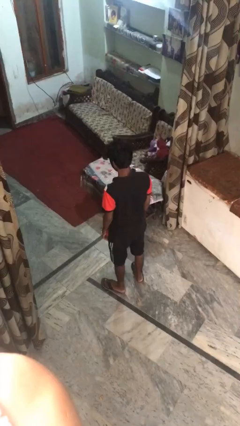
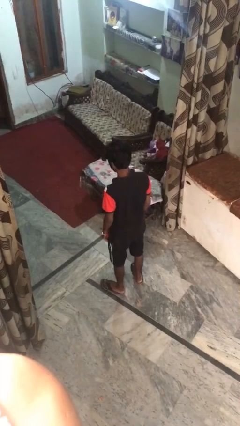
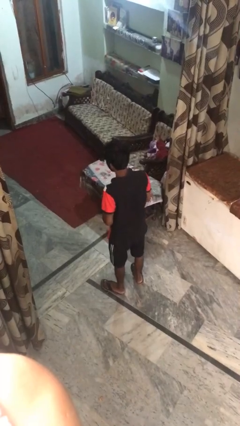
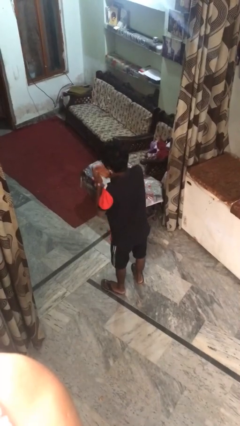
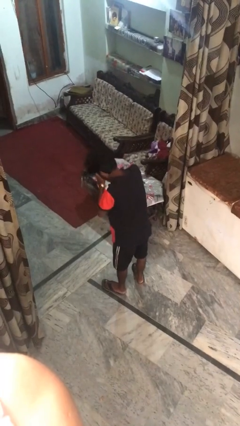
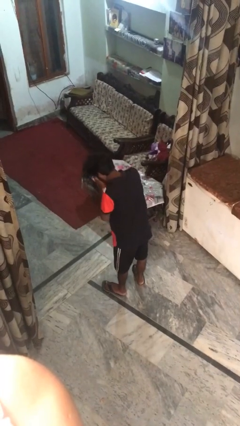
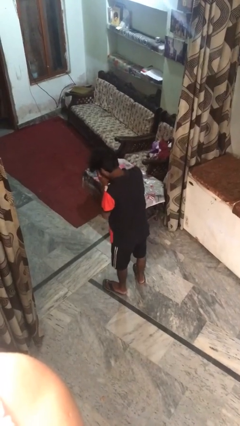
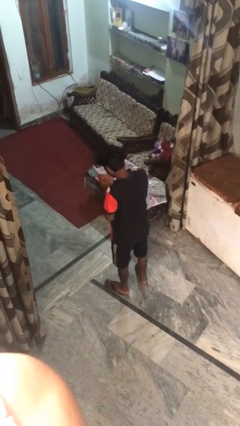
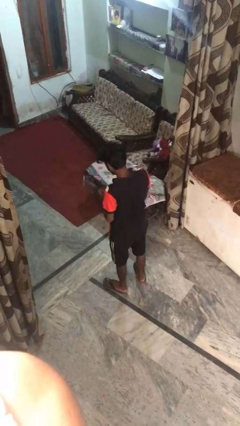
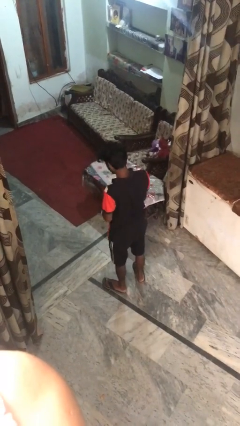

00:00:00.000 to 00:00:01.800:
person sneezes into hand

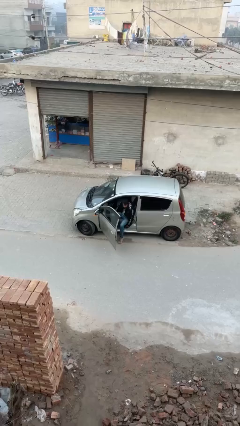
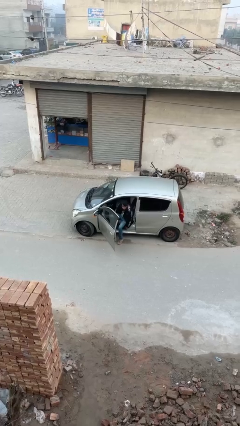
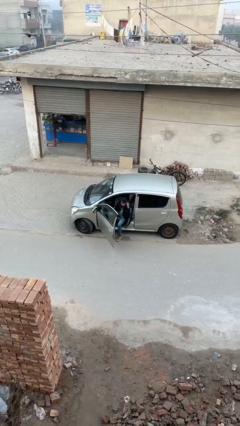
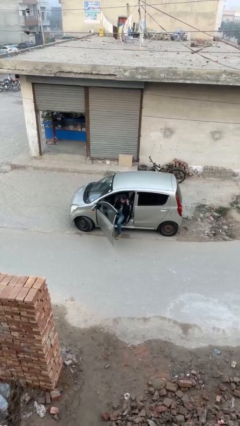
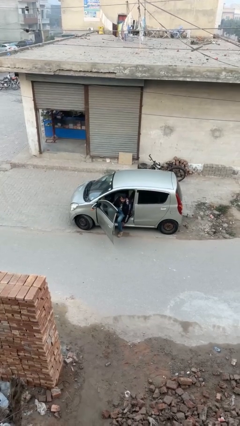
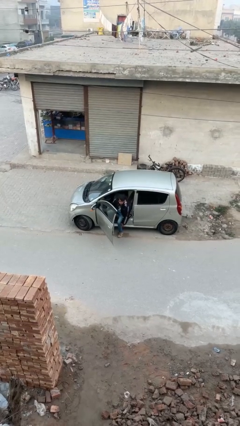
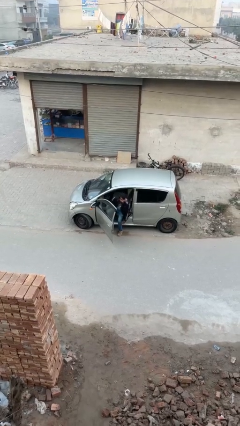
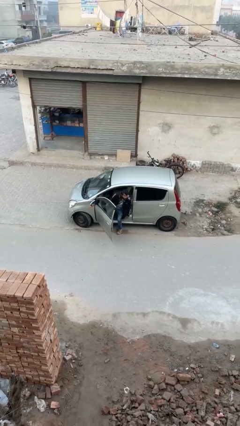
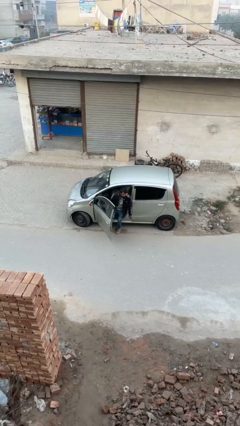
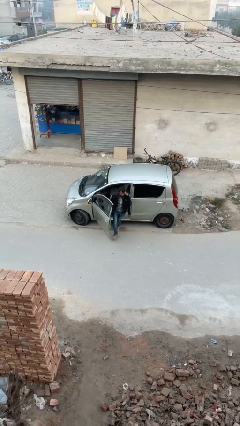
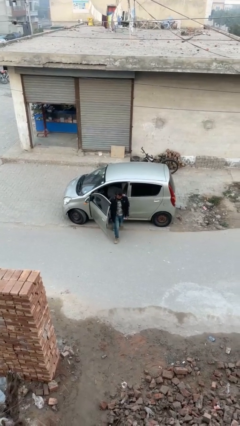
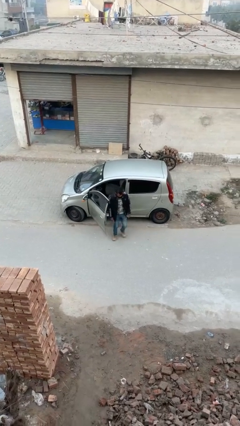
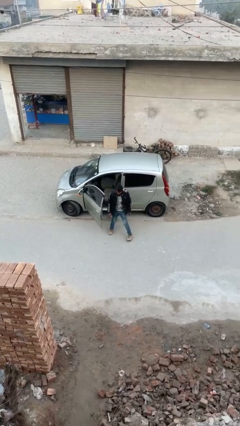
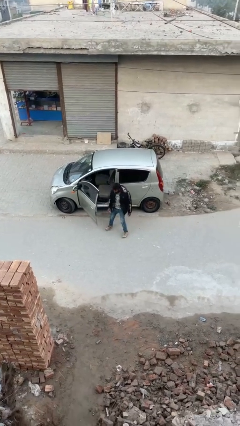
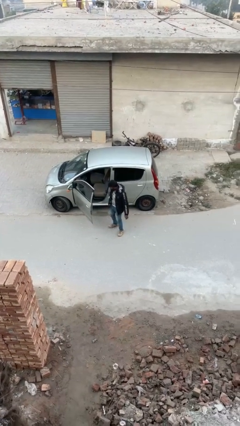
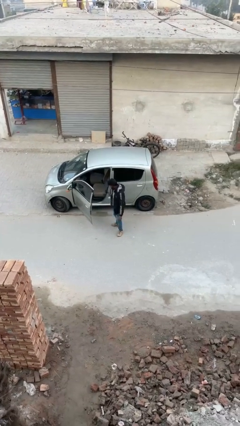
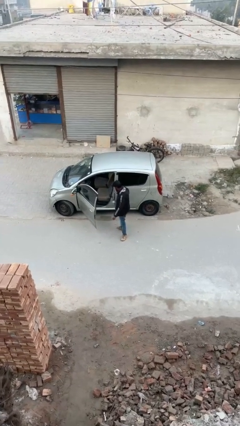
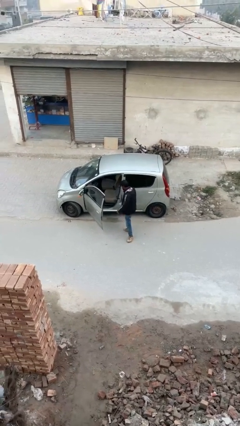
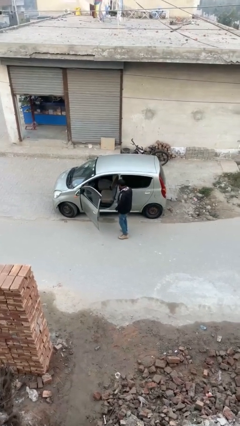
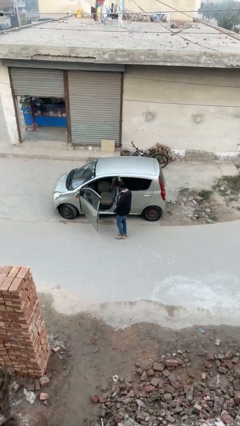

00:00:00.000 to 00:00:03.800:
person exits car

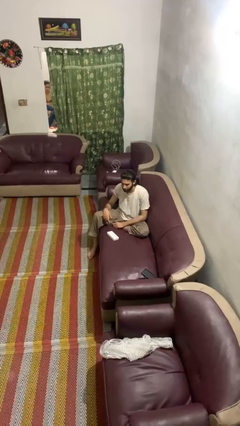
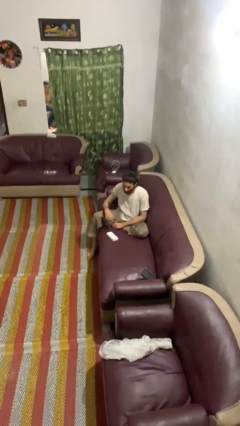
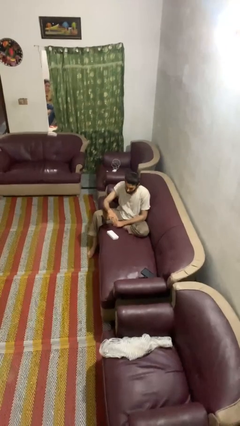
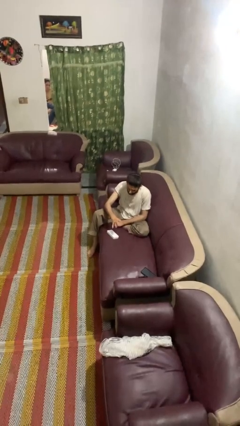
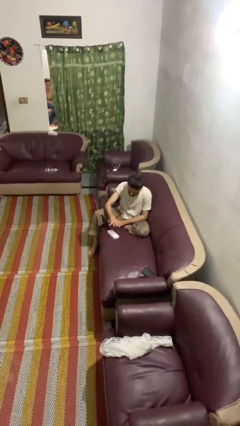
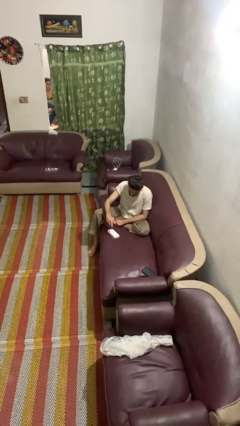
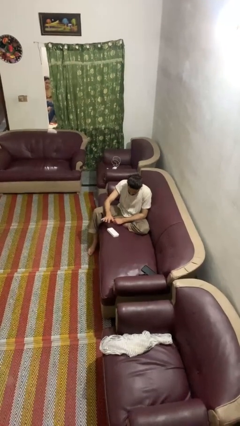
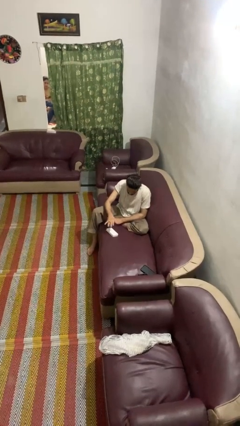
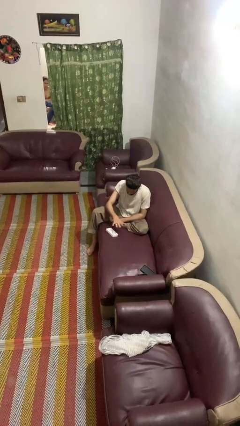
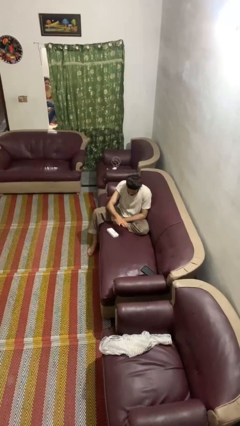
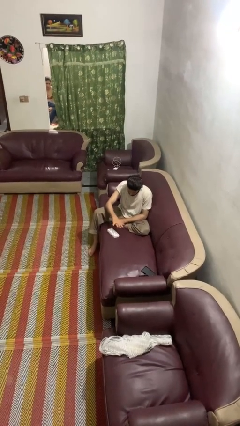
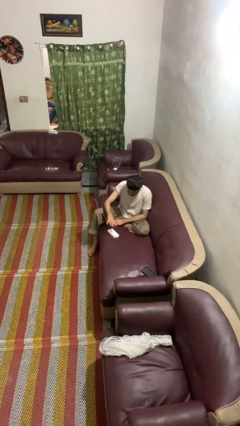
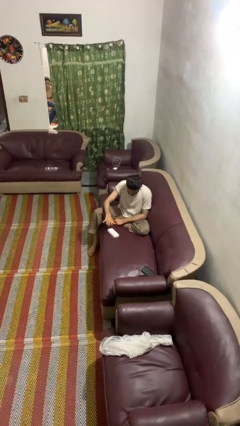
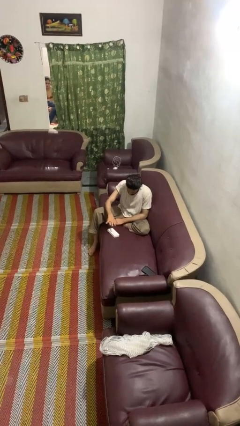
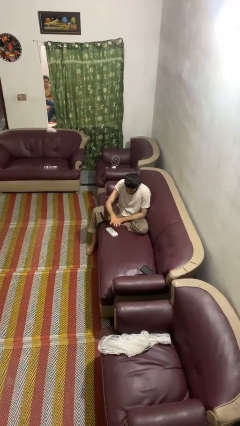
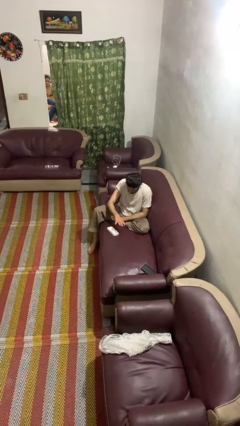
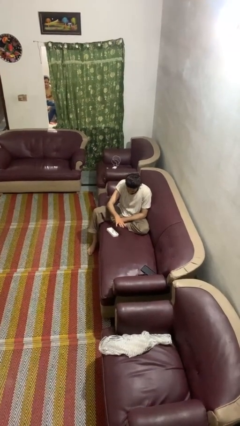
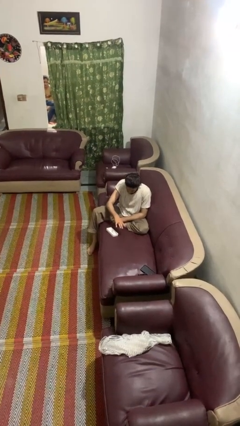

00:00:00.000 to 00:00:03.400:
person waves hand over object

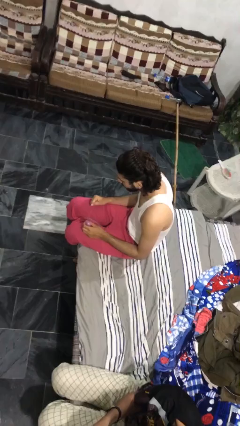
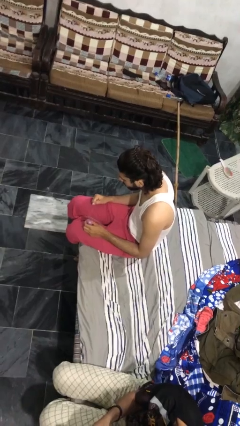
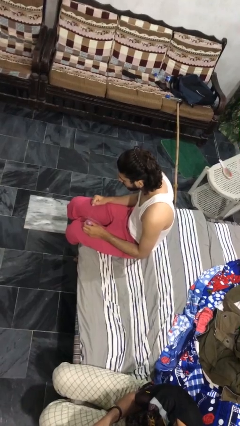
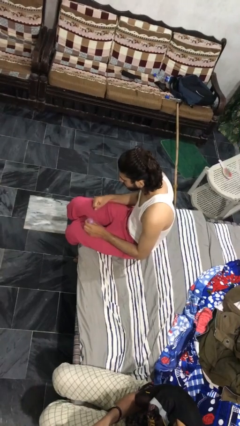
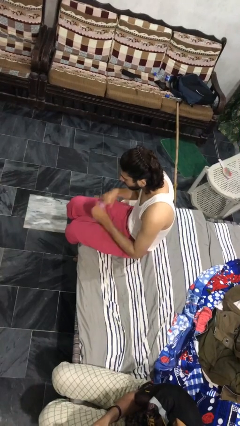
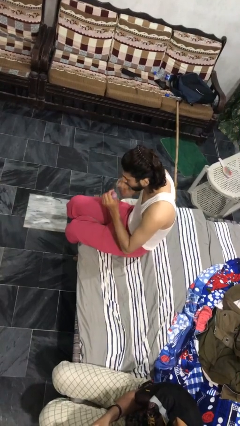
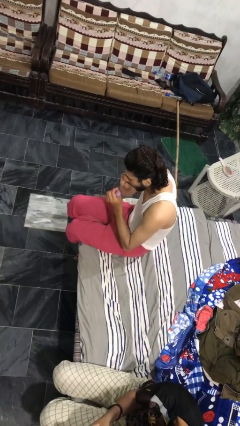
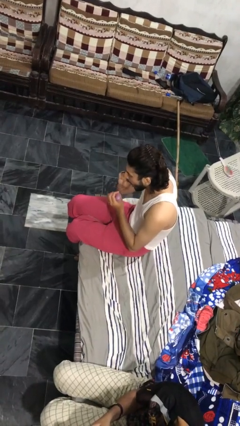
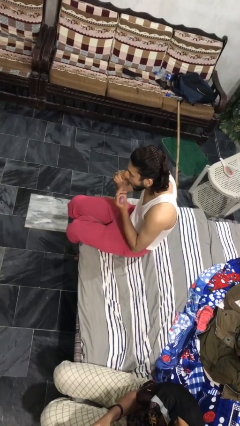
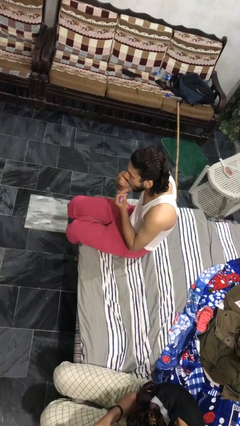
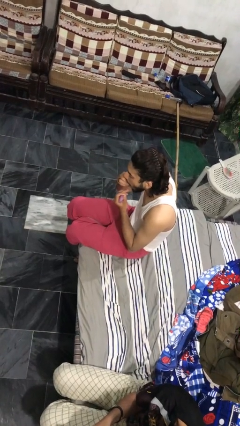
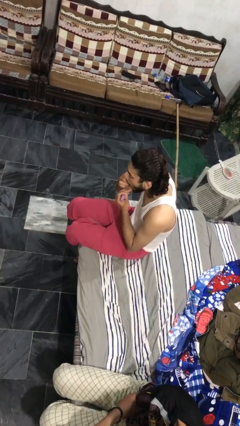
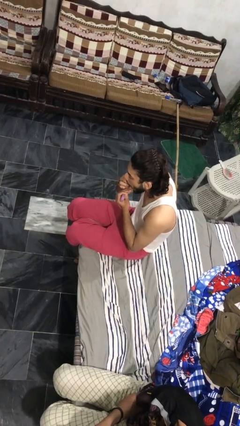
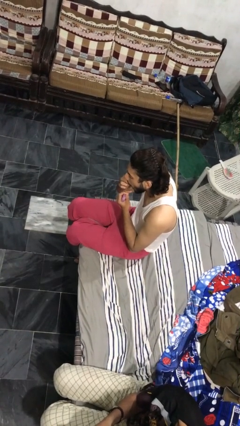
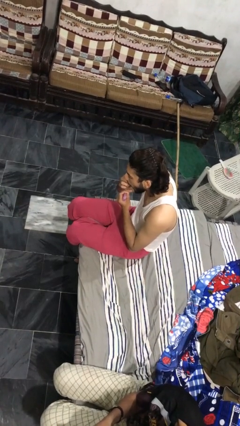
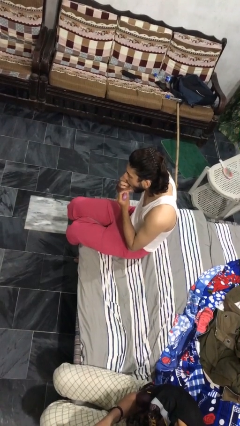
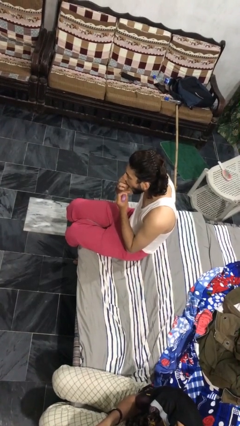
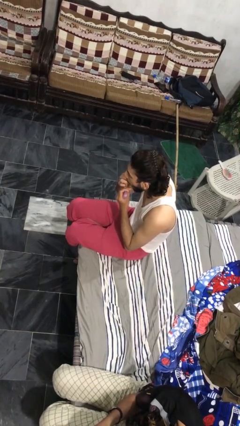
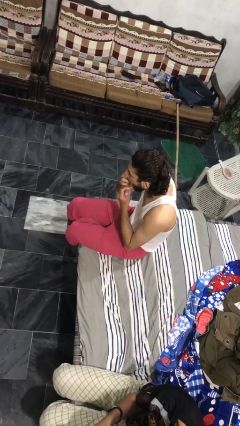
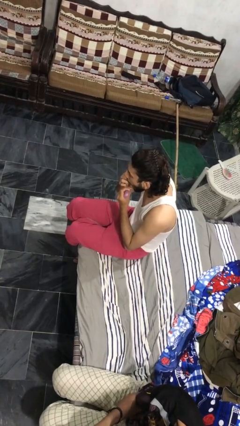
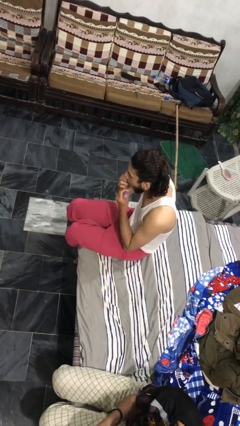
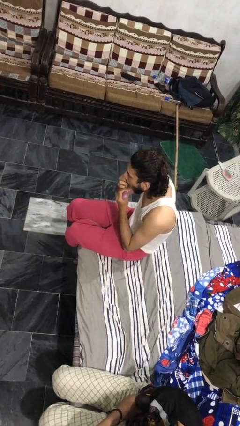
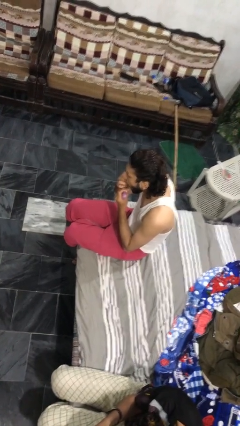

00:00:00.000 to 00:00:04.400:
person flosses

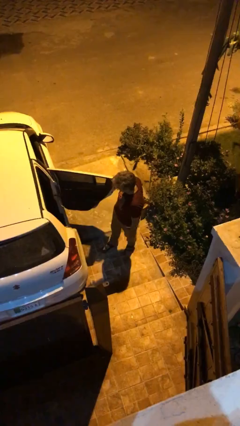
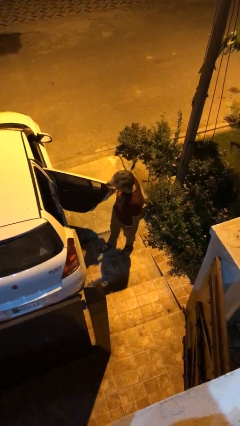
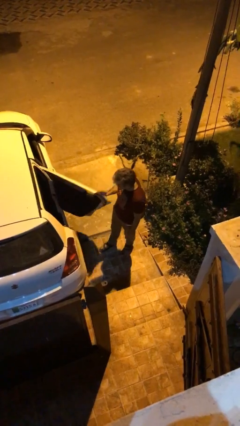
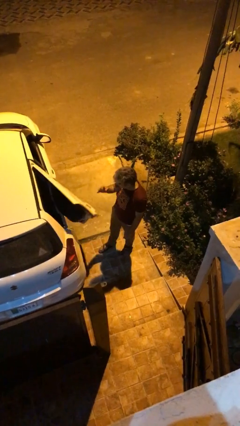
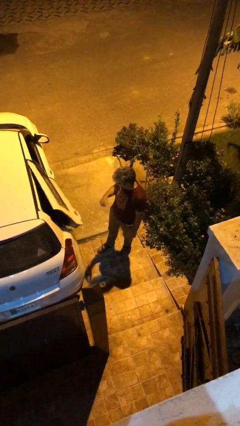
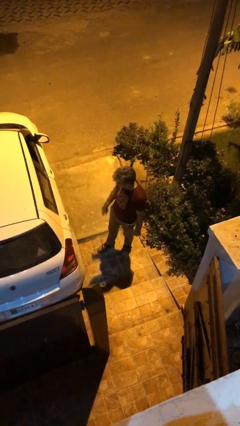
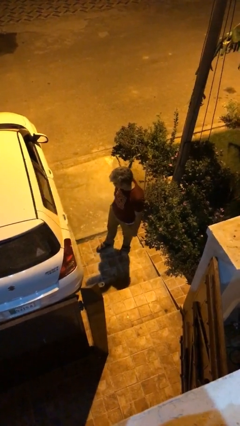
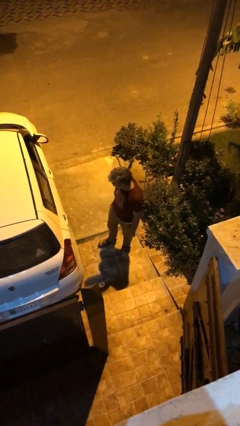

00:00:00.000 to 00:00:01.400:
person closes car door

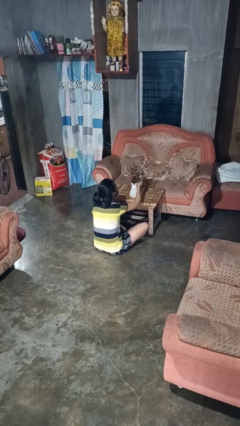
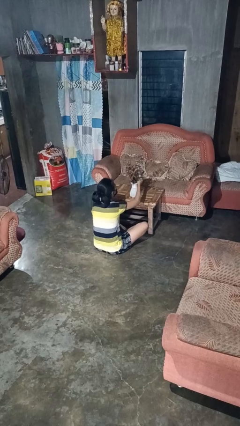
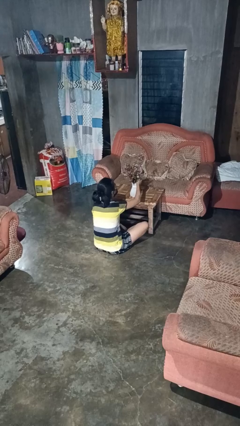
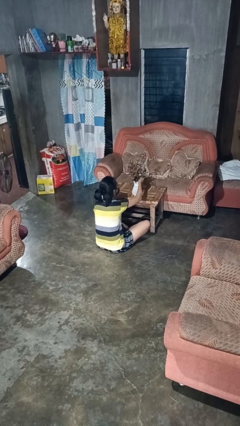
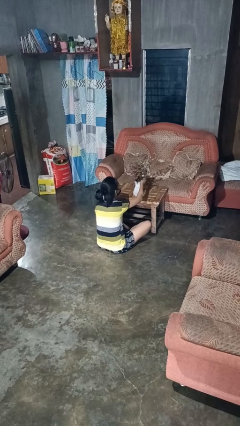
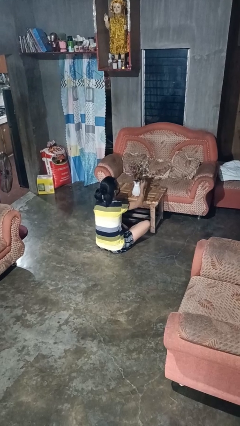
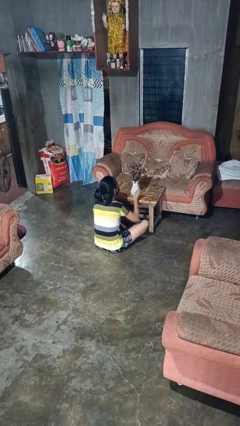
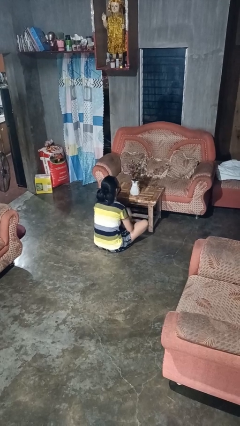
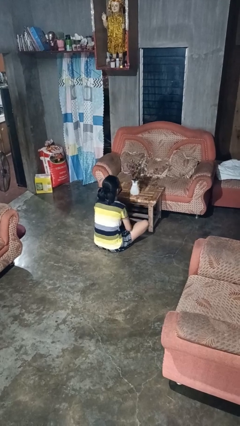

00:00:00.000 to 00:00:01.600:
person arranges flowers in vase

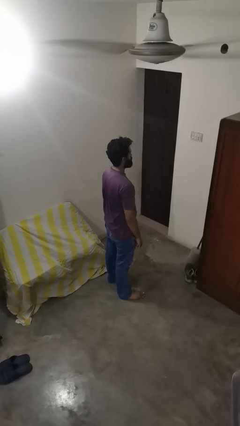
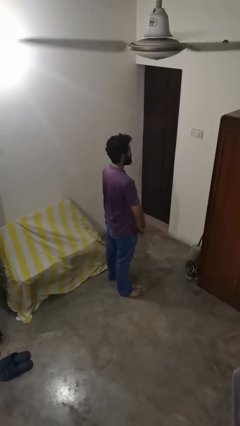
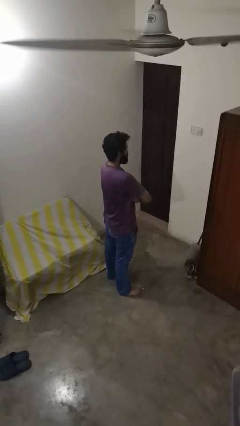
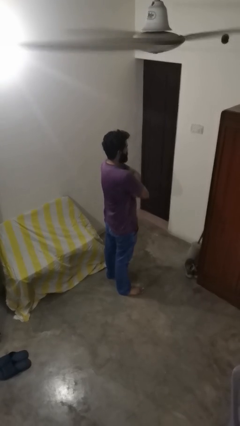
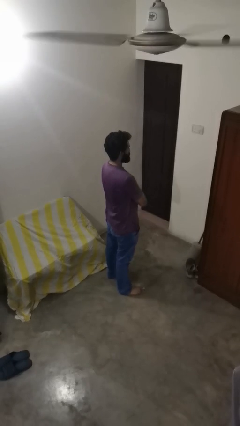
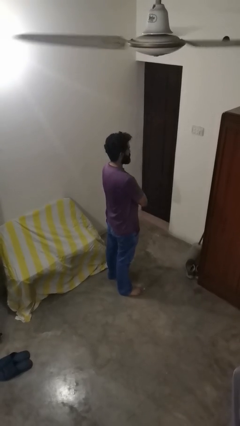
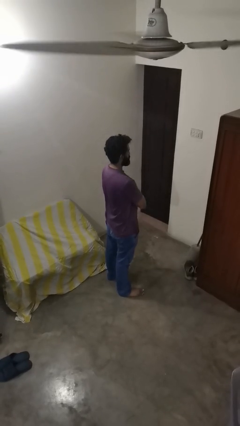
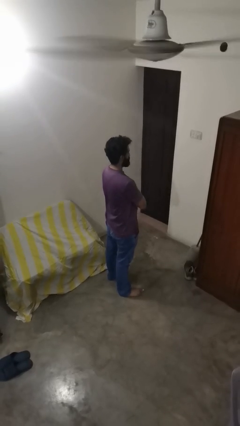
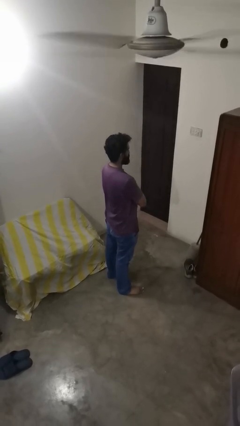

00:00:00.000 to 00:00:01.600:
person crosses arms
